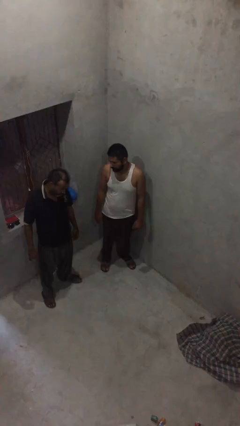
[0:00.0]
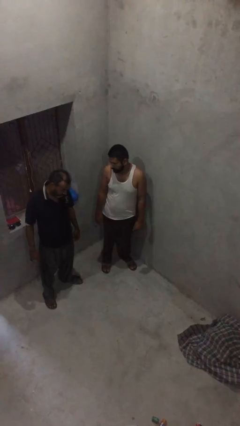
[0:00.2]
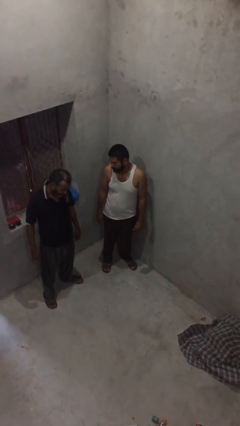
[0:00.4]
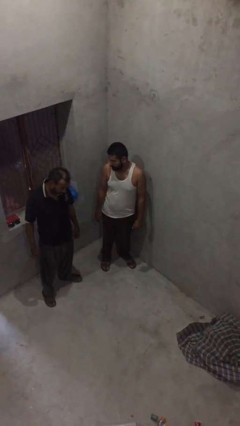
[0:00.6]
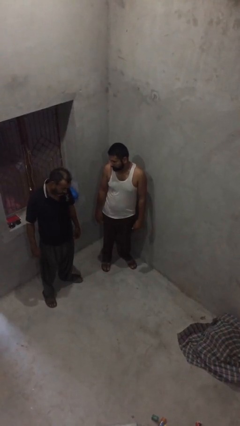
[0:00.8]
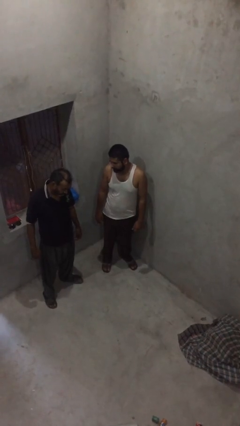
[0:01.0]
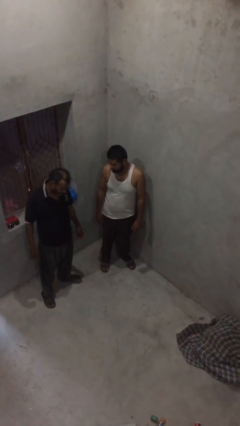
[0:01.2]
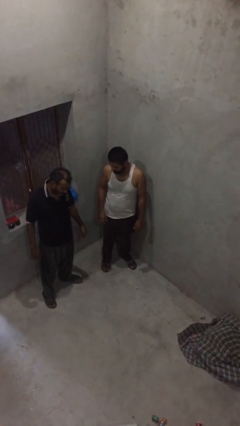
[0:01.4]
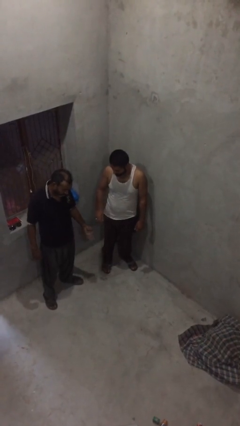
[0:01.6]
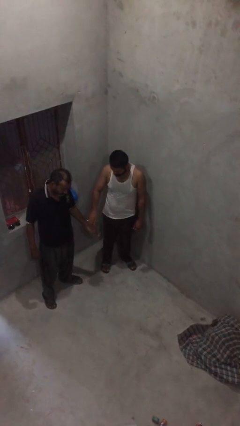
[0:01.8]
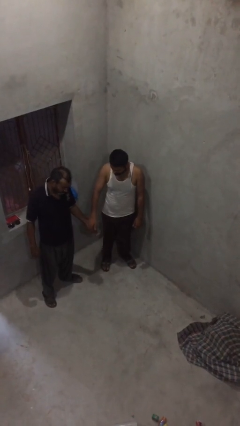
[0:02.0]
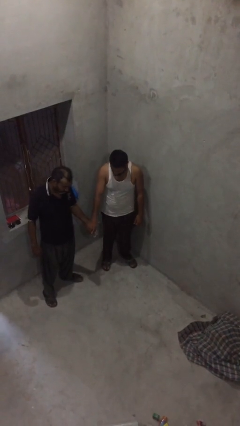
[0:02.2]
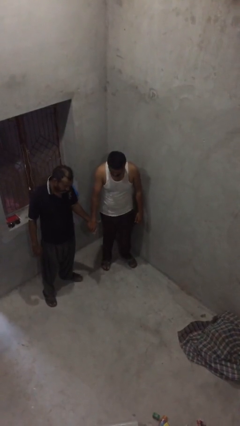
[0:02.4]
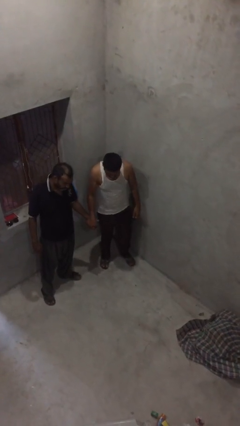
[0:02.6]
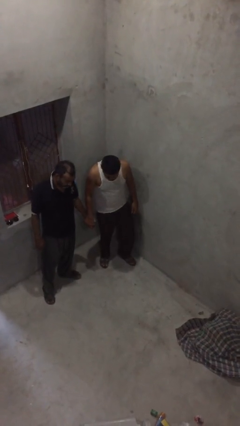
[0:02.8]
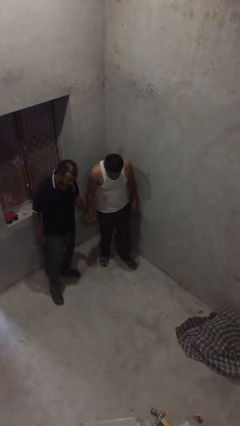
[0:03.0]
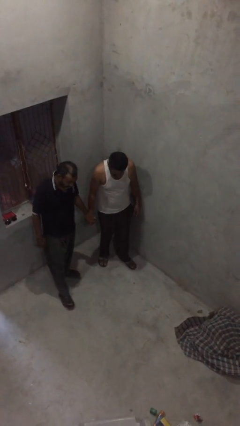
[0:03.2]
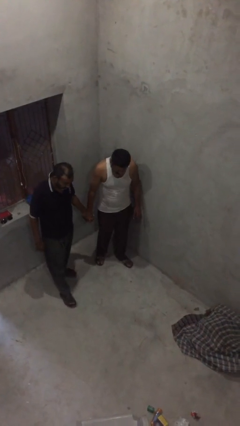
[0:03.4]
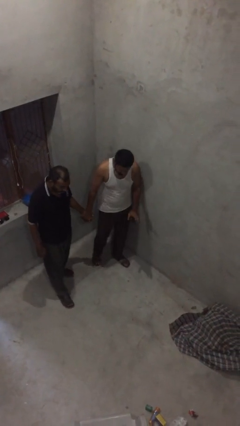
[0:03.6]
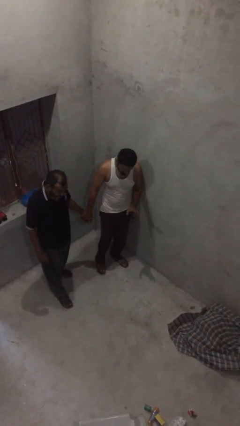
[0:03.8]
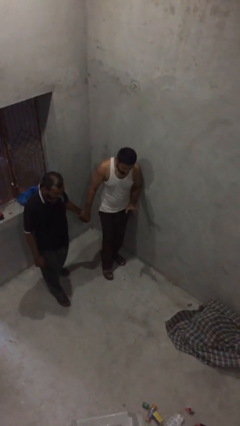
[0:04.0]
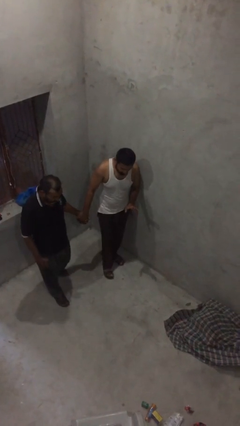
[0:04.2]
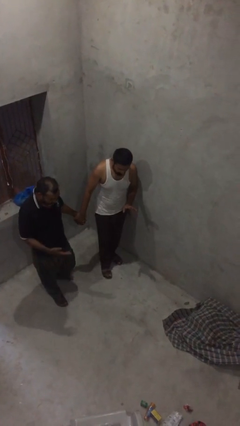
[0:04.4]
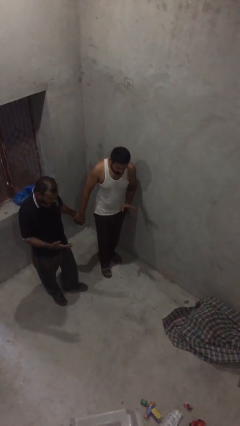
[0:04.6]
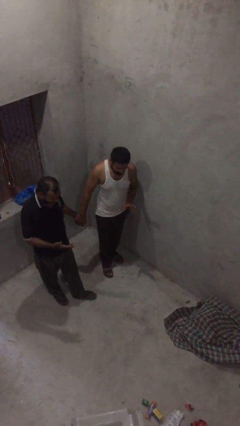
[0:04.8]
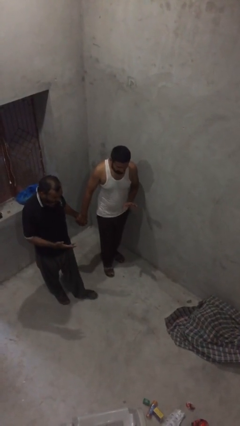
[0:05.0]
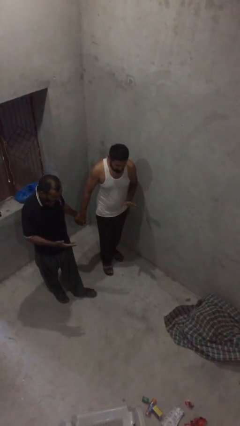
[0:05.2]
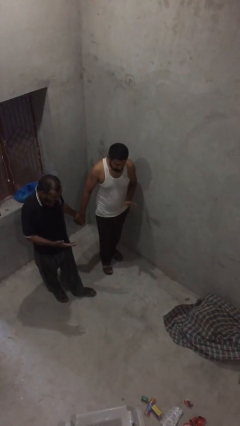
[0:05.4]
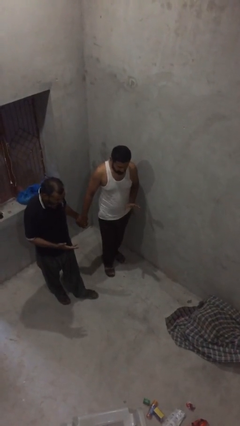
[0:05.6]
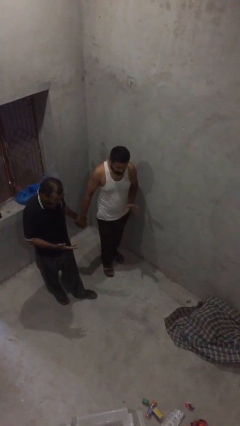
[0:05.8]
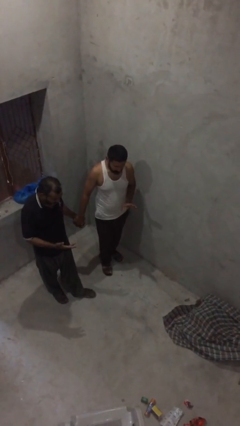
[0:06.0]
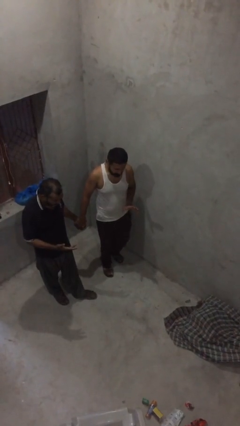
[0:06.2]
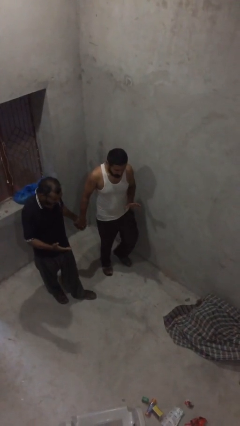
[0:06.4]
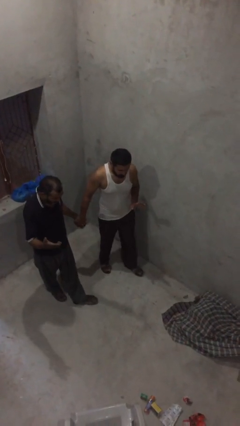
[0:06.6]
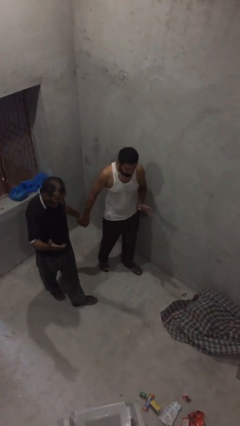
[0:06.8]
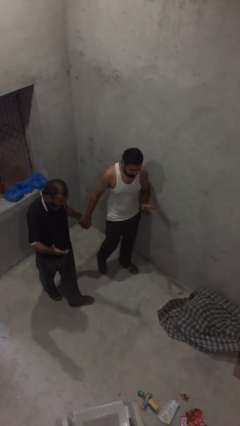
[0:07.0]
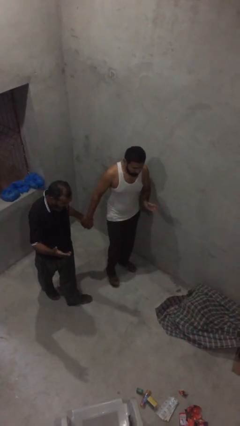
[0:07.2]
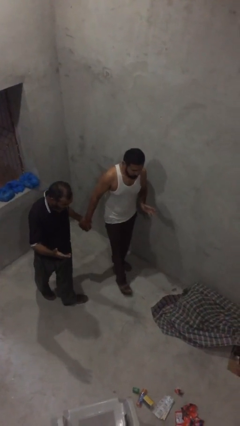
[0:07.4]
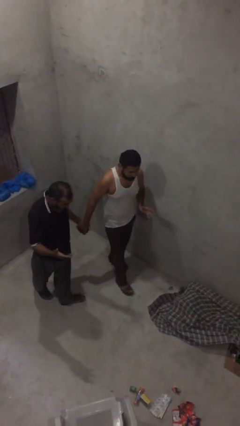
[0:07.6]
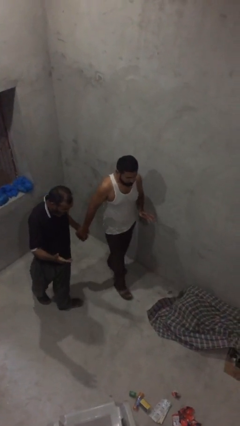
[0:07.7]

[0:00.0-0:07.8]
person holds hand

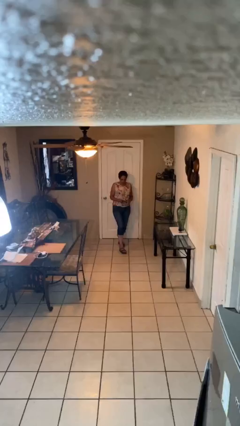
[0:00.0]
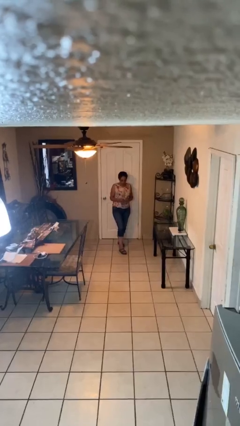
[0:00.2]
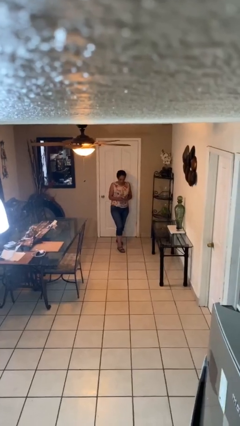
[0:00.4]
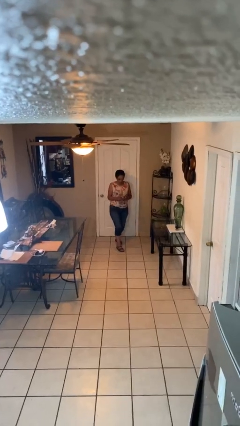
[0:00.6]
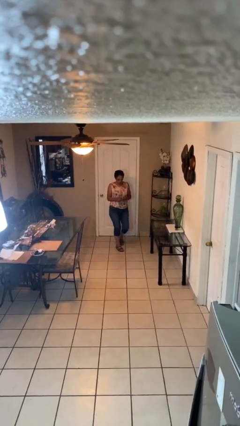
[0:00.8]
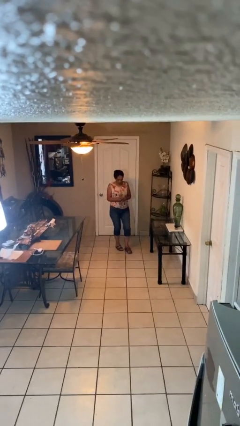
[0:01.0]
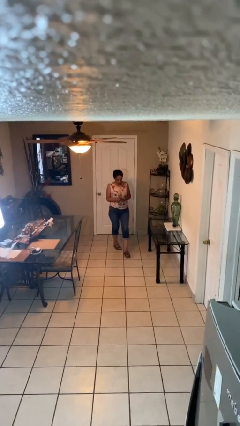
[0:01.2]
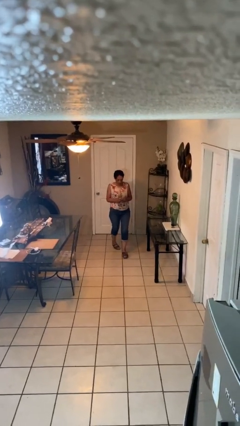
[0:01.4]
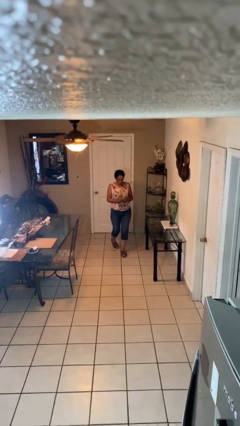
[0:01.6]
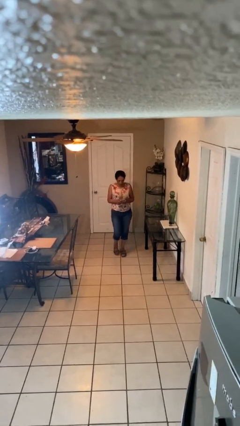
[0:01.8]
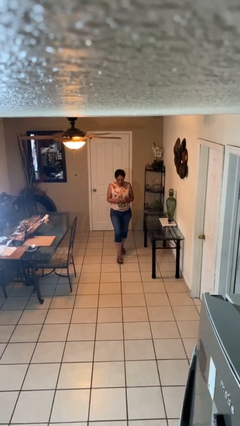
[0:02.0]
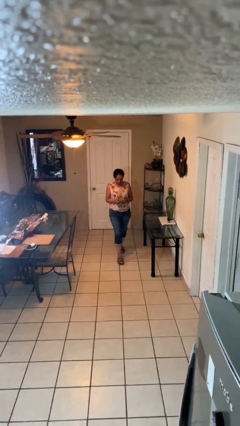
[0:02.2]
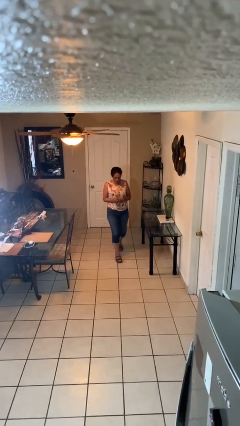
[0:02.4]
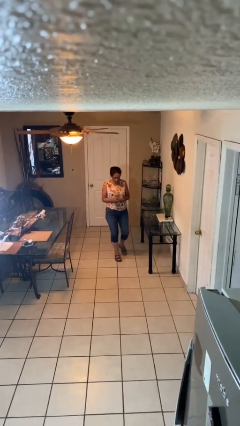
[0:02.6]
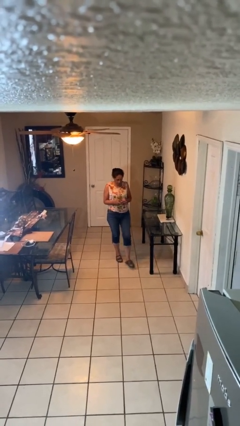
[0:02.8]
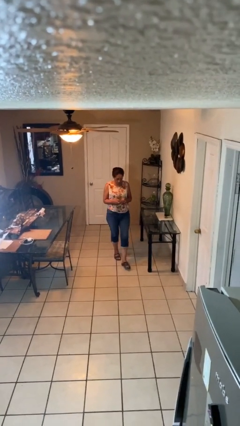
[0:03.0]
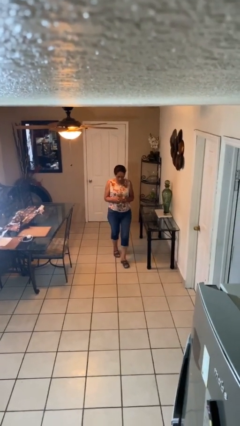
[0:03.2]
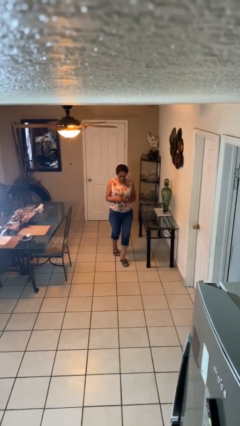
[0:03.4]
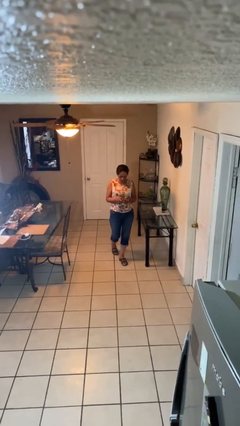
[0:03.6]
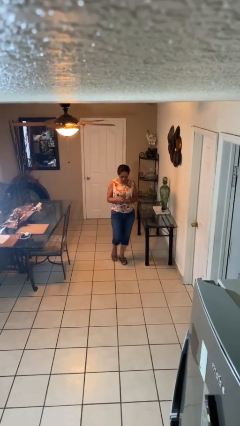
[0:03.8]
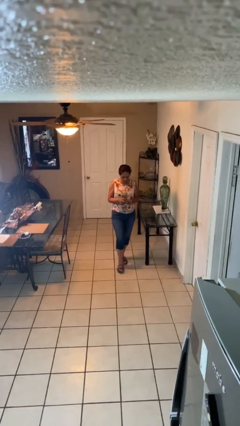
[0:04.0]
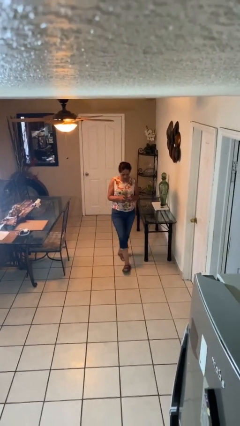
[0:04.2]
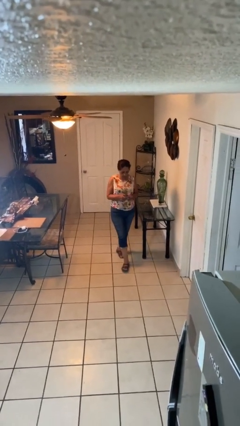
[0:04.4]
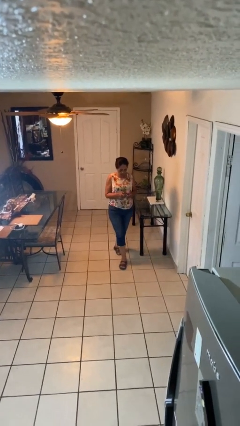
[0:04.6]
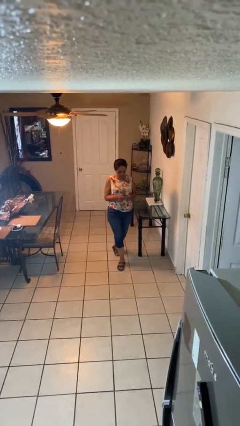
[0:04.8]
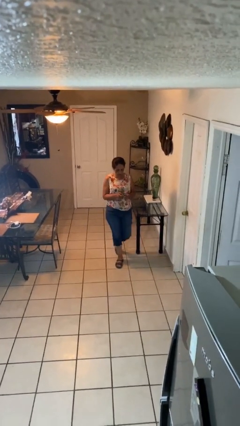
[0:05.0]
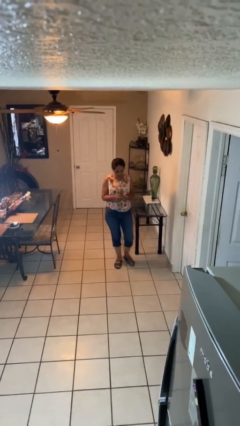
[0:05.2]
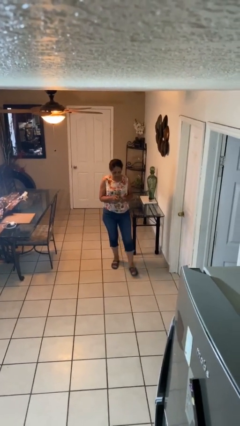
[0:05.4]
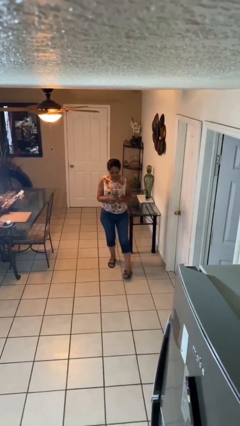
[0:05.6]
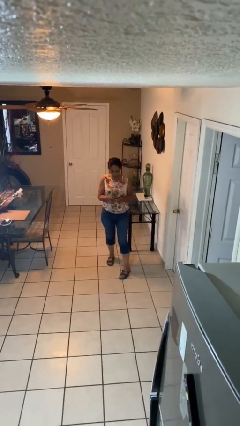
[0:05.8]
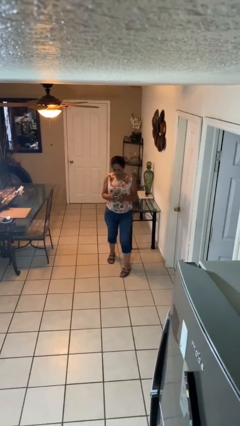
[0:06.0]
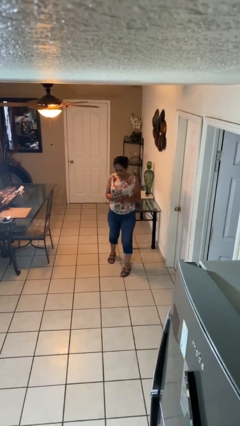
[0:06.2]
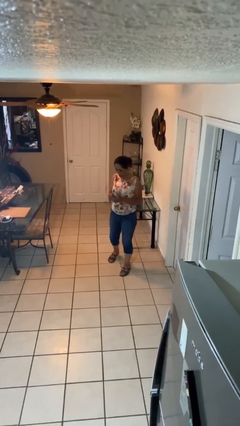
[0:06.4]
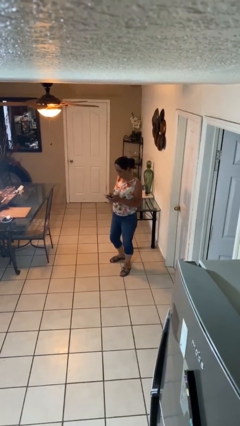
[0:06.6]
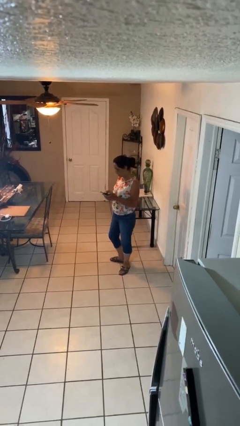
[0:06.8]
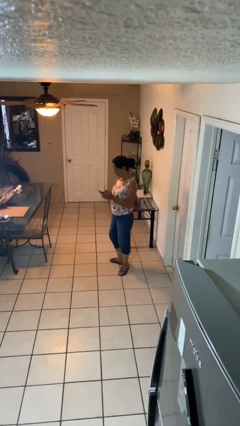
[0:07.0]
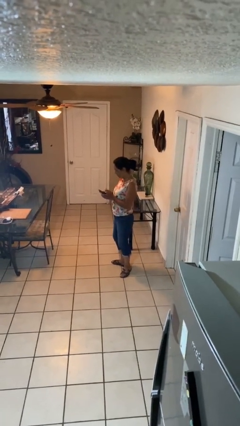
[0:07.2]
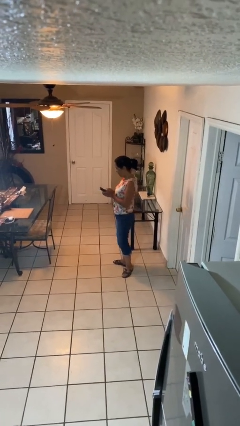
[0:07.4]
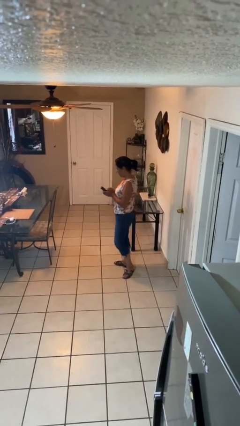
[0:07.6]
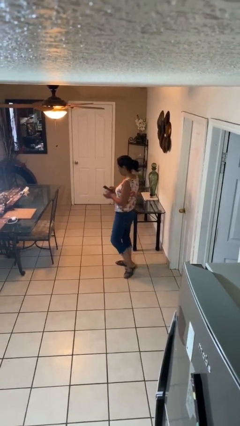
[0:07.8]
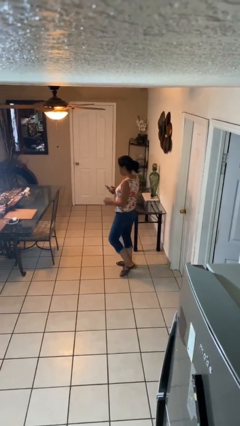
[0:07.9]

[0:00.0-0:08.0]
person texts on phone

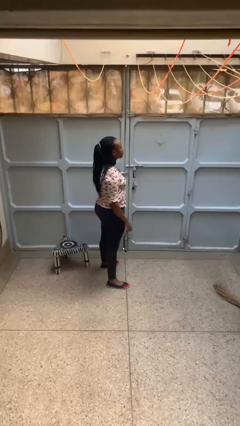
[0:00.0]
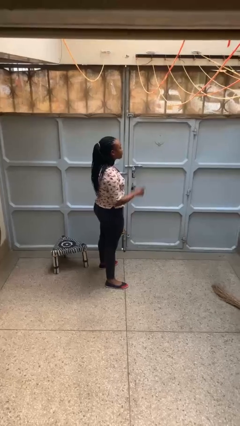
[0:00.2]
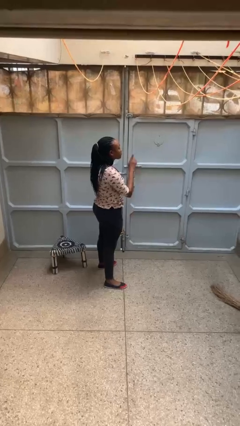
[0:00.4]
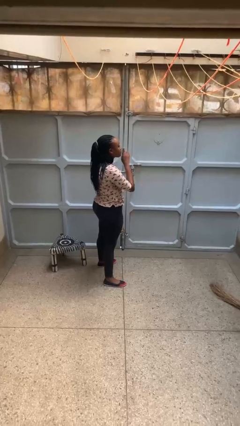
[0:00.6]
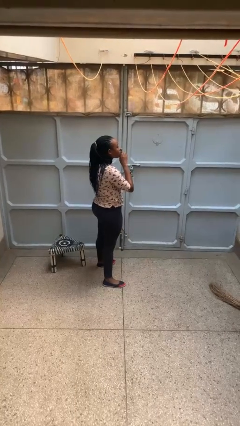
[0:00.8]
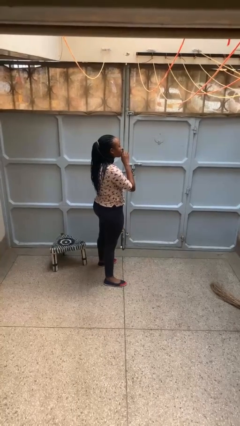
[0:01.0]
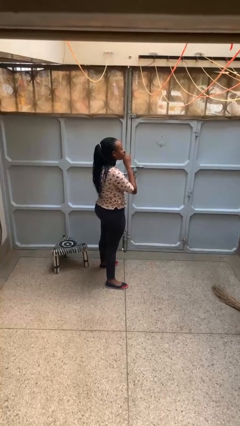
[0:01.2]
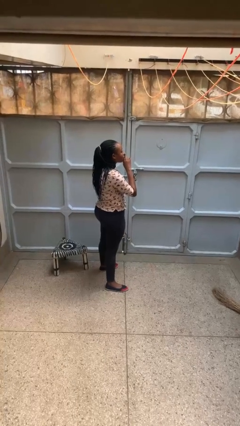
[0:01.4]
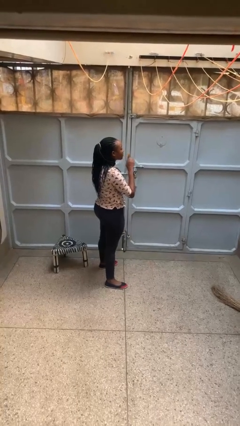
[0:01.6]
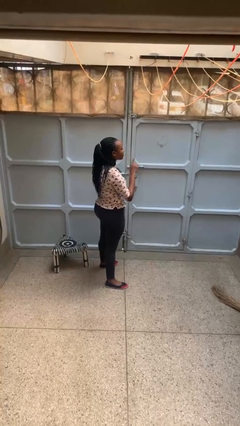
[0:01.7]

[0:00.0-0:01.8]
person gestures be quiet

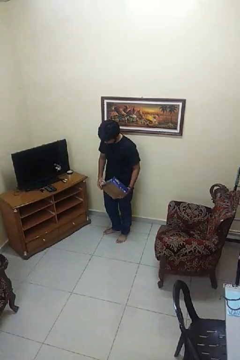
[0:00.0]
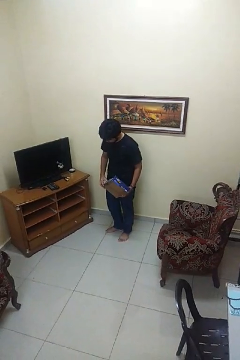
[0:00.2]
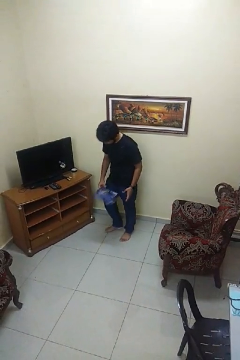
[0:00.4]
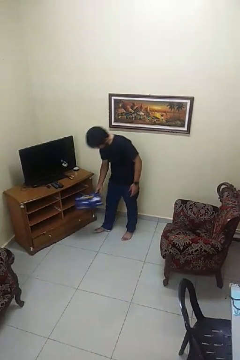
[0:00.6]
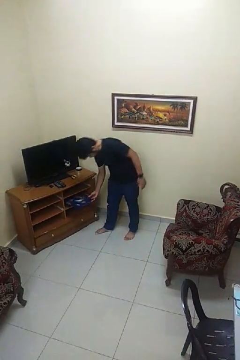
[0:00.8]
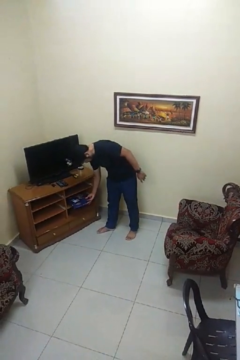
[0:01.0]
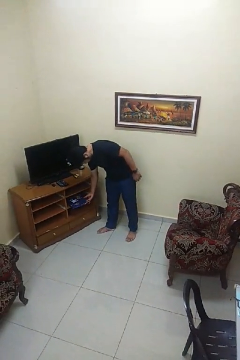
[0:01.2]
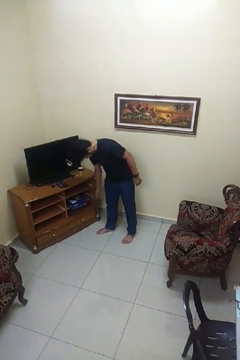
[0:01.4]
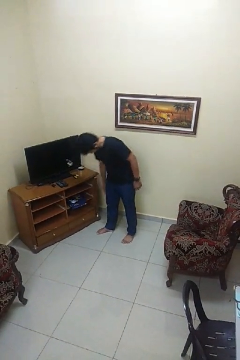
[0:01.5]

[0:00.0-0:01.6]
person puts down object into cabinet
